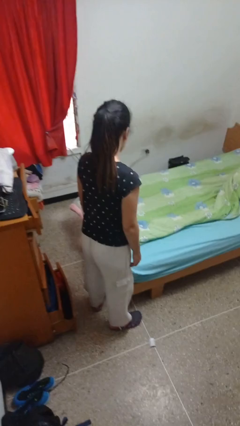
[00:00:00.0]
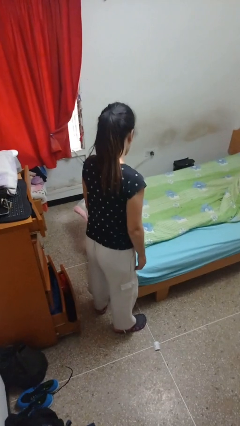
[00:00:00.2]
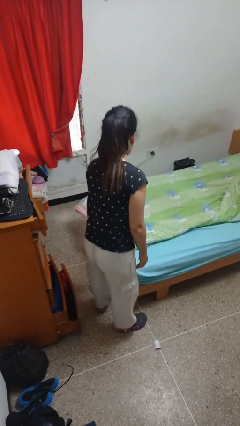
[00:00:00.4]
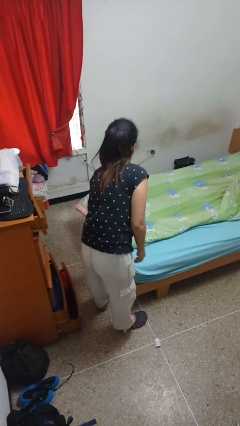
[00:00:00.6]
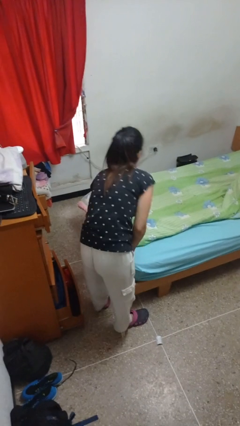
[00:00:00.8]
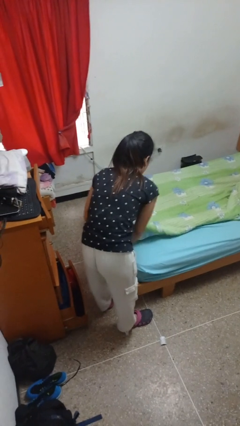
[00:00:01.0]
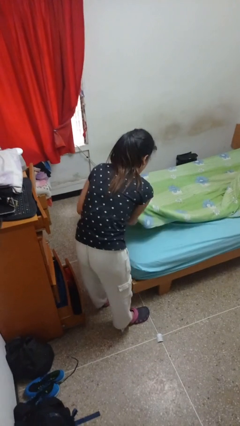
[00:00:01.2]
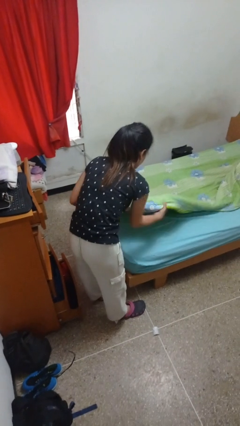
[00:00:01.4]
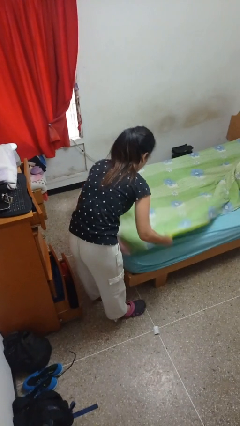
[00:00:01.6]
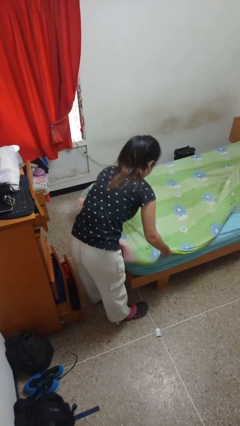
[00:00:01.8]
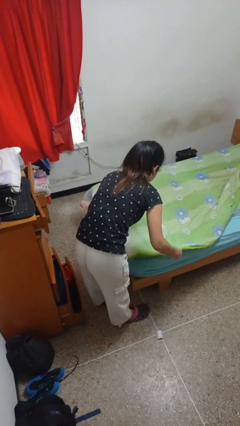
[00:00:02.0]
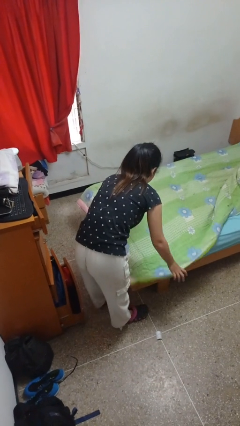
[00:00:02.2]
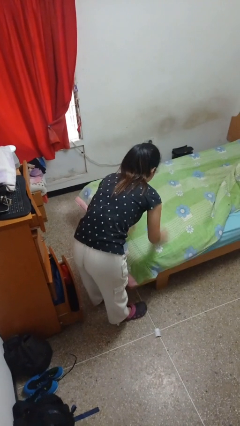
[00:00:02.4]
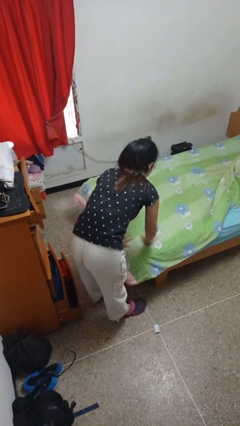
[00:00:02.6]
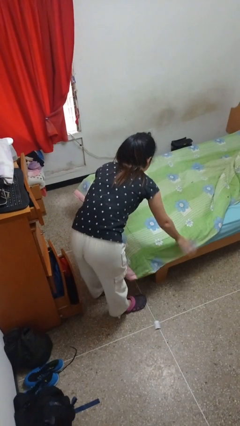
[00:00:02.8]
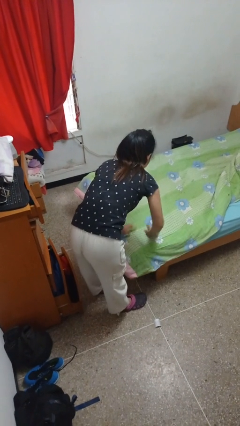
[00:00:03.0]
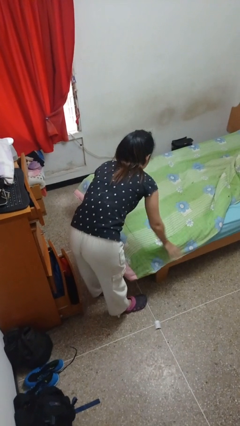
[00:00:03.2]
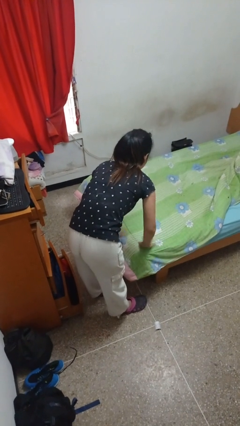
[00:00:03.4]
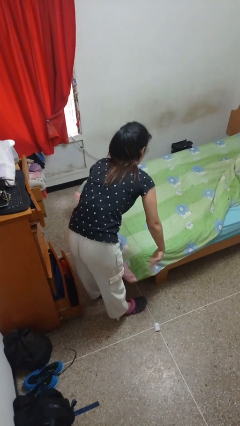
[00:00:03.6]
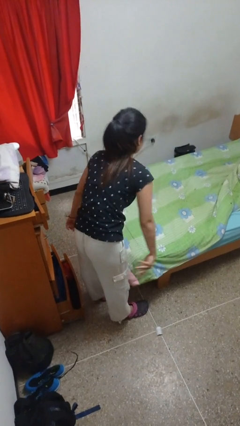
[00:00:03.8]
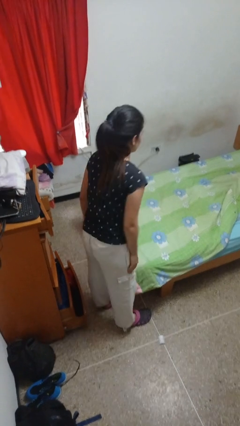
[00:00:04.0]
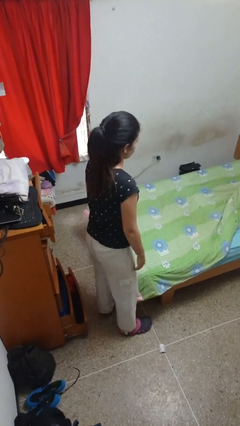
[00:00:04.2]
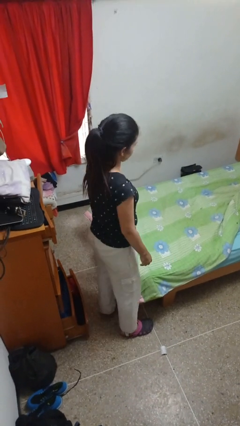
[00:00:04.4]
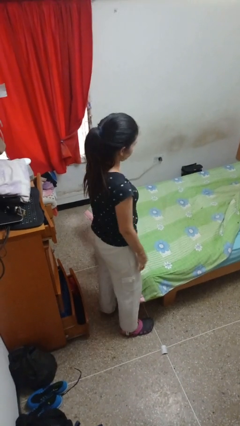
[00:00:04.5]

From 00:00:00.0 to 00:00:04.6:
person makes bed

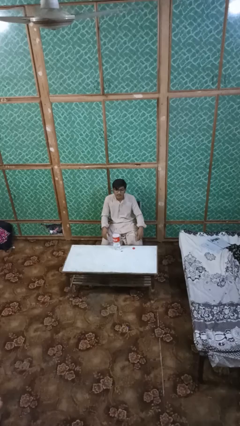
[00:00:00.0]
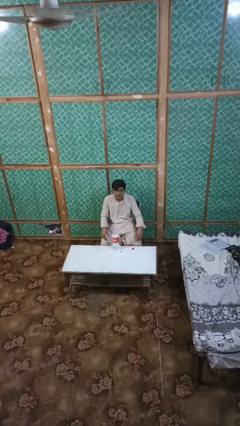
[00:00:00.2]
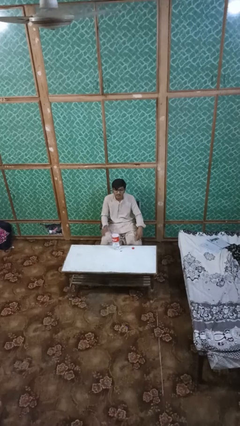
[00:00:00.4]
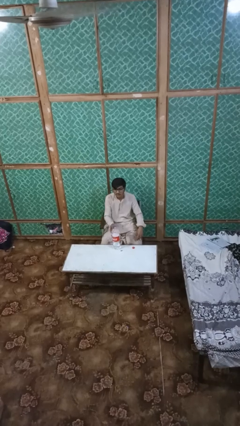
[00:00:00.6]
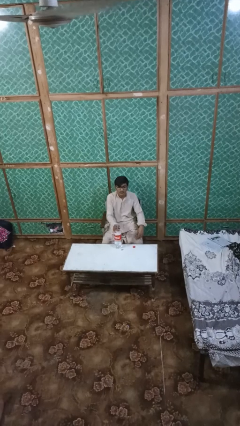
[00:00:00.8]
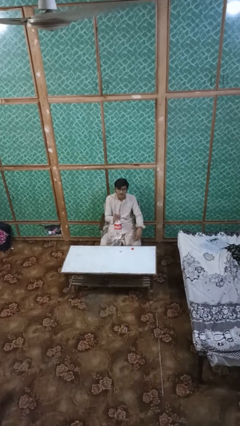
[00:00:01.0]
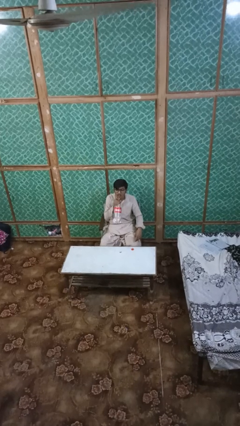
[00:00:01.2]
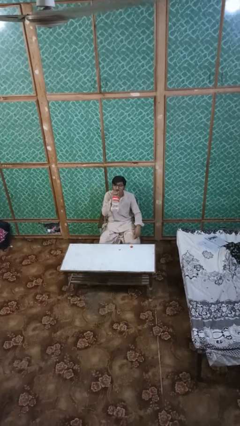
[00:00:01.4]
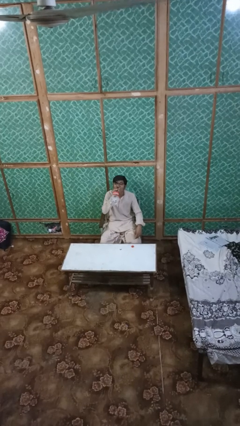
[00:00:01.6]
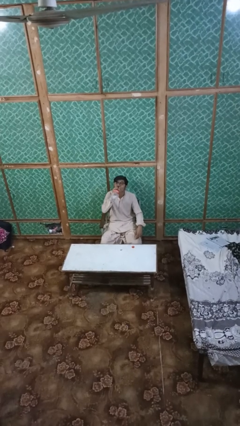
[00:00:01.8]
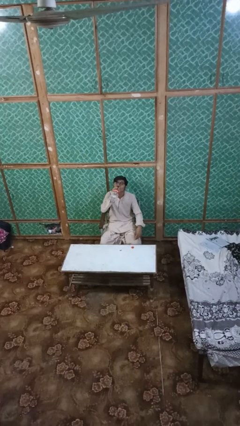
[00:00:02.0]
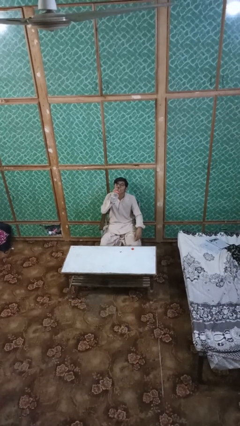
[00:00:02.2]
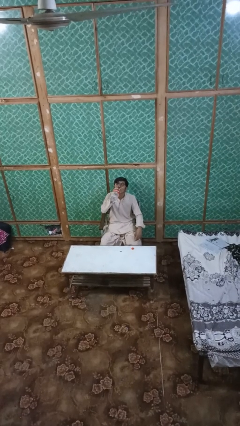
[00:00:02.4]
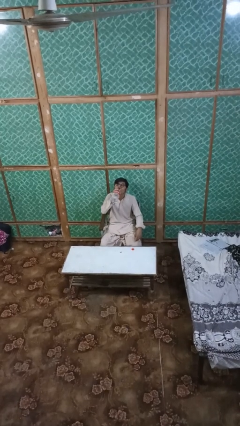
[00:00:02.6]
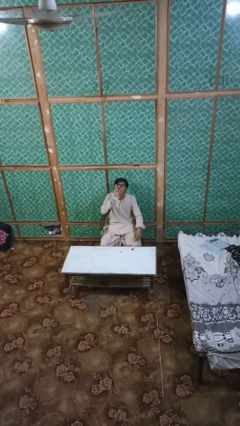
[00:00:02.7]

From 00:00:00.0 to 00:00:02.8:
person drinks from bottle

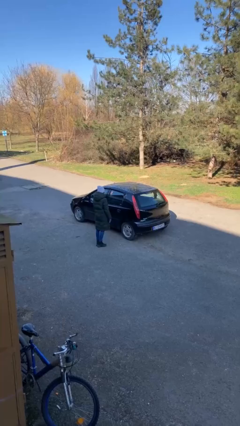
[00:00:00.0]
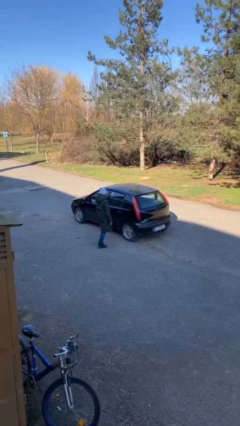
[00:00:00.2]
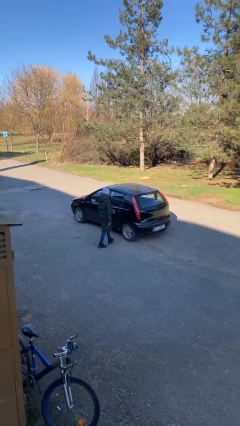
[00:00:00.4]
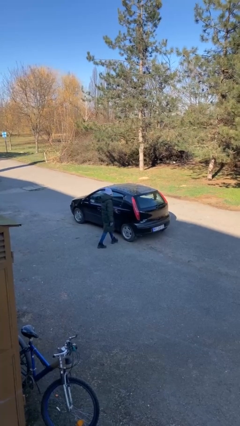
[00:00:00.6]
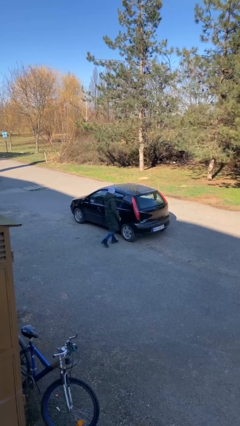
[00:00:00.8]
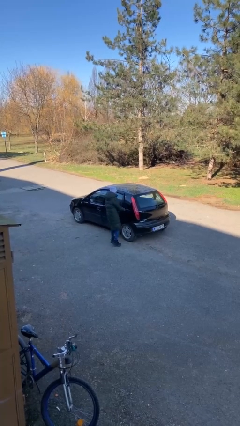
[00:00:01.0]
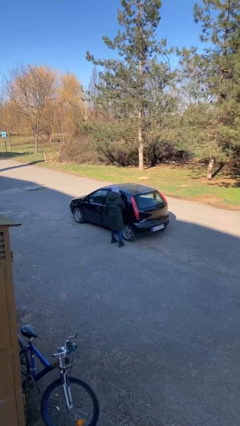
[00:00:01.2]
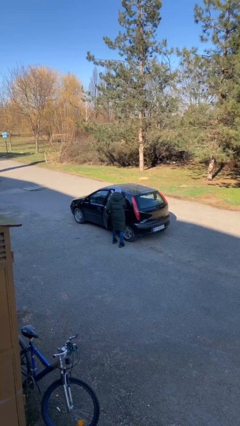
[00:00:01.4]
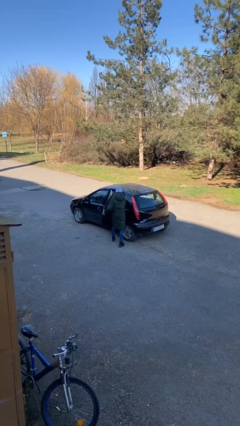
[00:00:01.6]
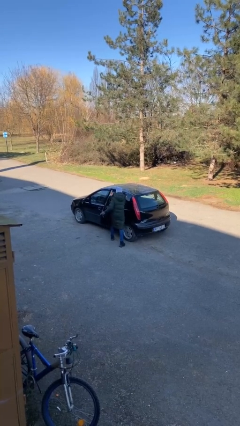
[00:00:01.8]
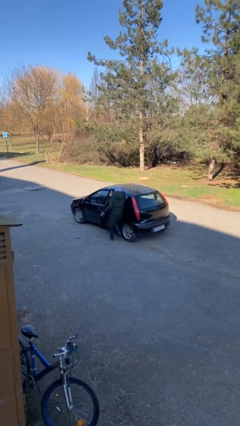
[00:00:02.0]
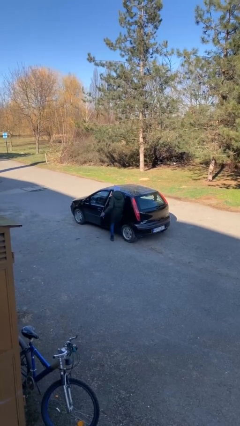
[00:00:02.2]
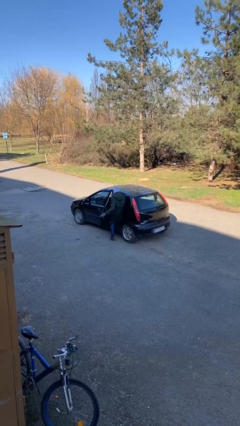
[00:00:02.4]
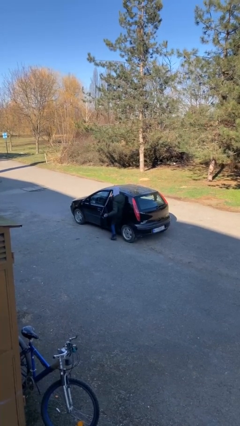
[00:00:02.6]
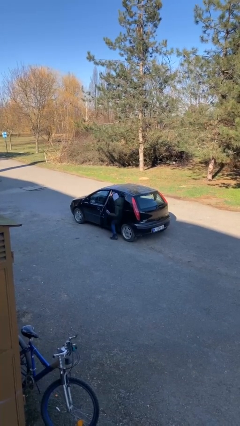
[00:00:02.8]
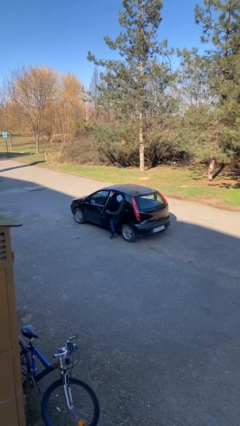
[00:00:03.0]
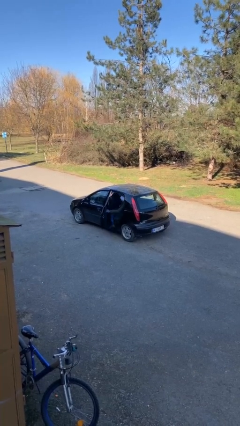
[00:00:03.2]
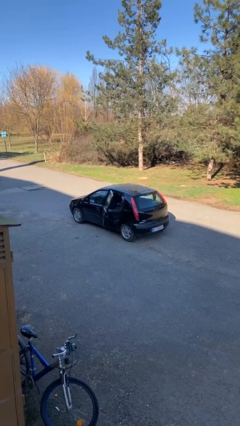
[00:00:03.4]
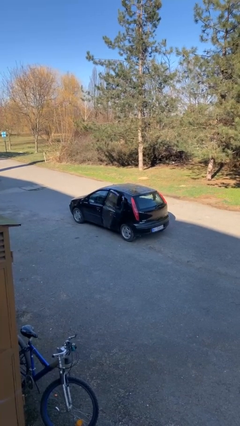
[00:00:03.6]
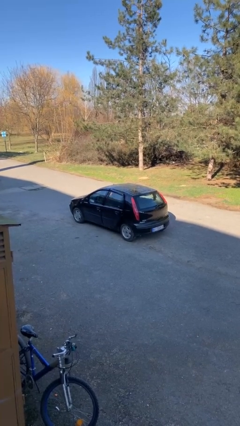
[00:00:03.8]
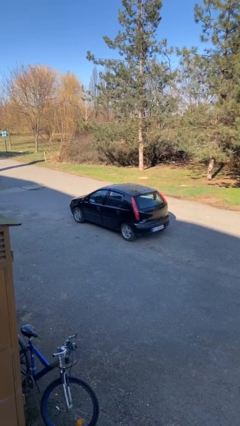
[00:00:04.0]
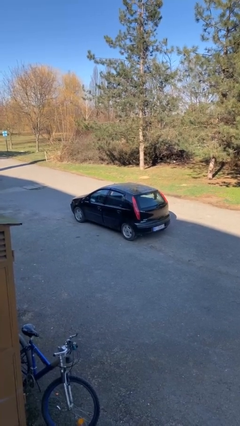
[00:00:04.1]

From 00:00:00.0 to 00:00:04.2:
car picks up person

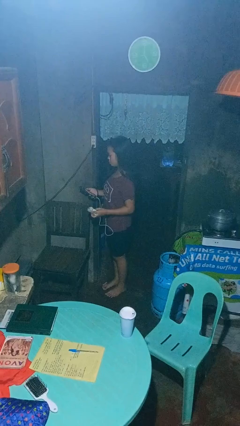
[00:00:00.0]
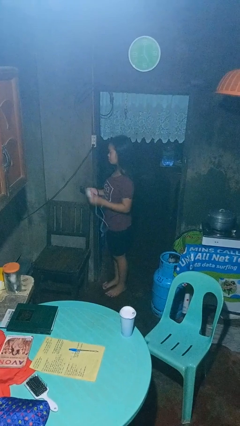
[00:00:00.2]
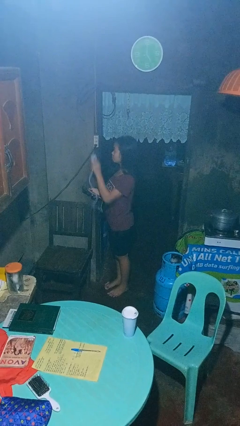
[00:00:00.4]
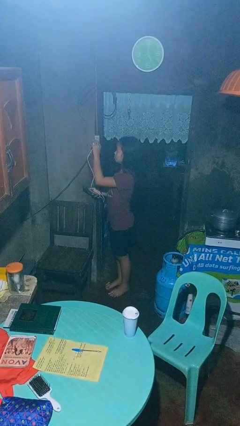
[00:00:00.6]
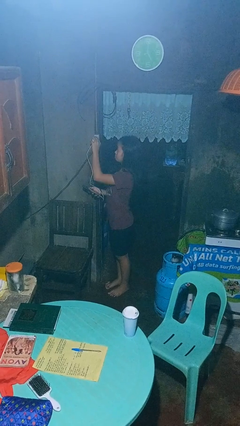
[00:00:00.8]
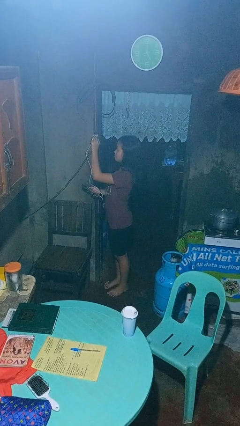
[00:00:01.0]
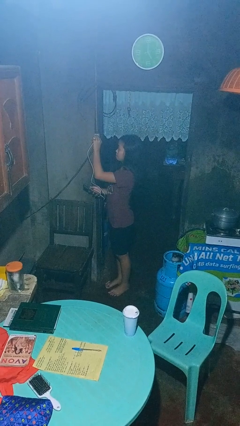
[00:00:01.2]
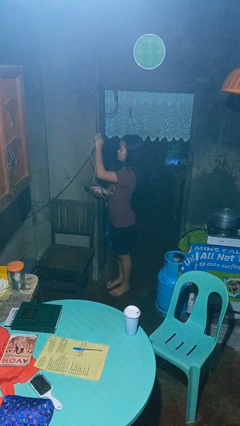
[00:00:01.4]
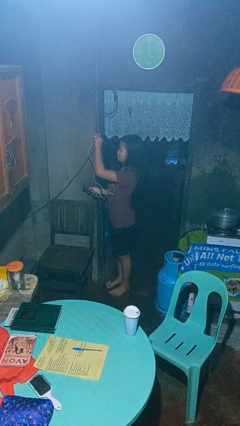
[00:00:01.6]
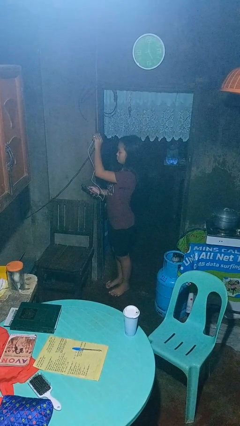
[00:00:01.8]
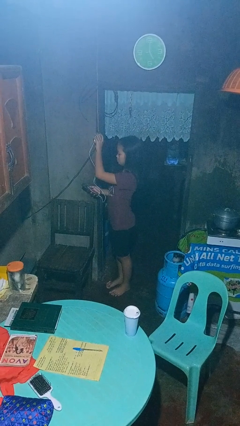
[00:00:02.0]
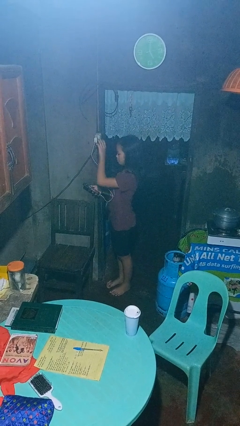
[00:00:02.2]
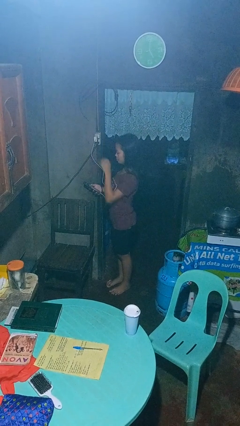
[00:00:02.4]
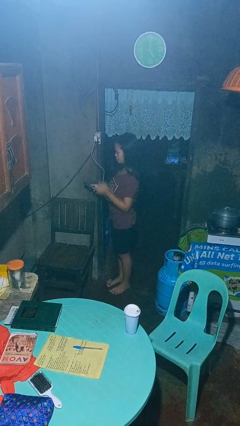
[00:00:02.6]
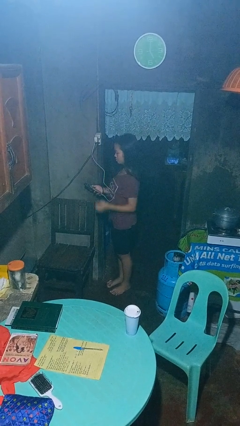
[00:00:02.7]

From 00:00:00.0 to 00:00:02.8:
person plugs into electrical socket

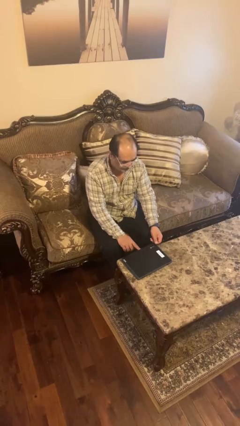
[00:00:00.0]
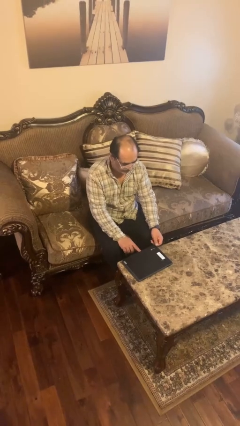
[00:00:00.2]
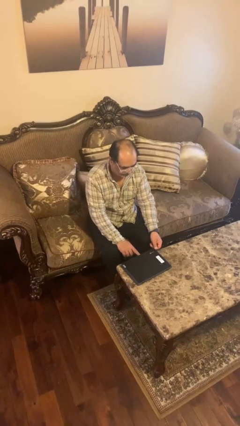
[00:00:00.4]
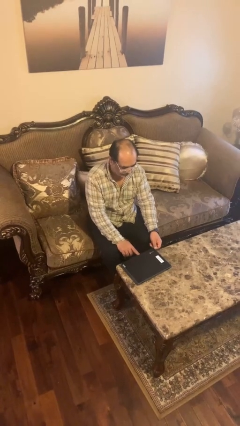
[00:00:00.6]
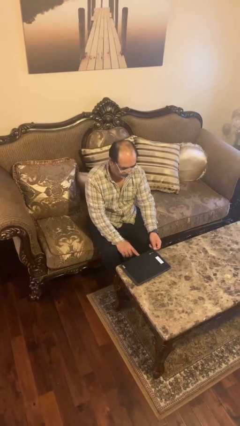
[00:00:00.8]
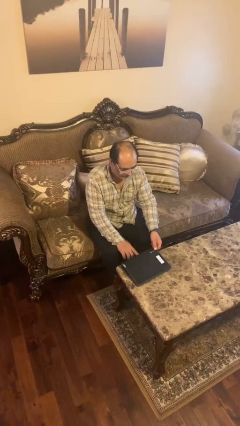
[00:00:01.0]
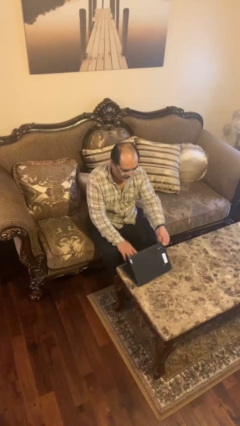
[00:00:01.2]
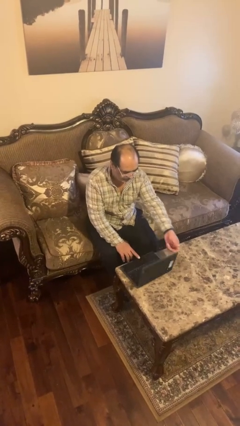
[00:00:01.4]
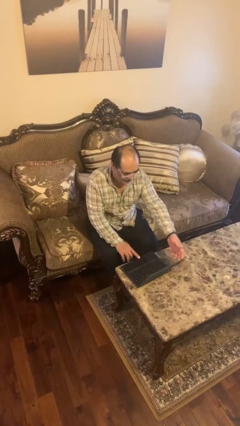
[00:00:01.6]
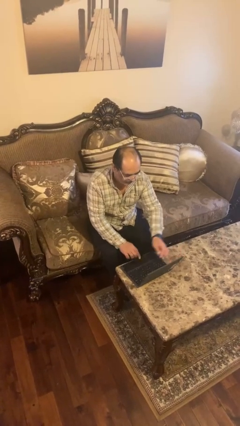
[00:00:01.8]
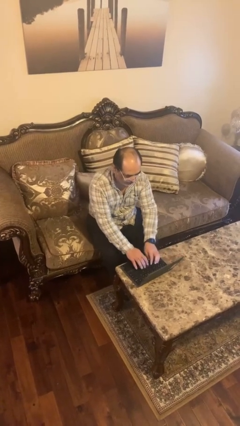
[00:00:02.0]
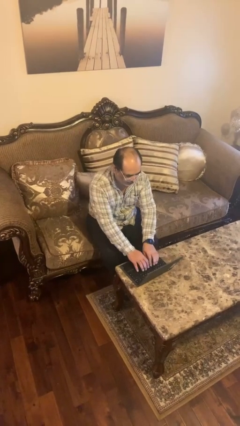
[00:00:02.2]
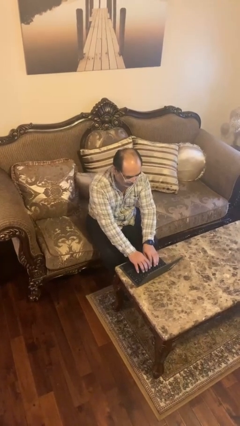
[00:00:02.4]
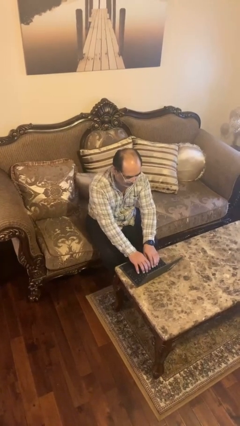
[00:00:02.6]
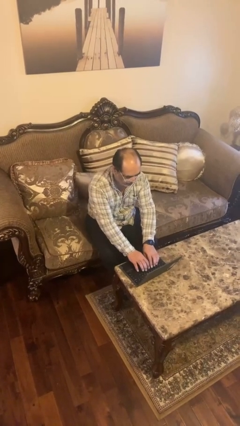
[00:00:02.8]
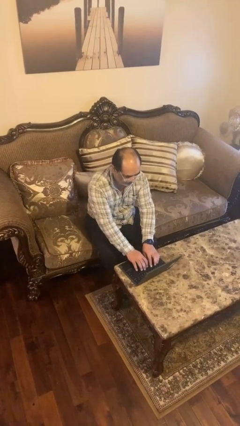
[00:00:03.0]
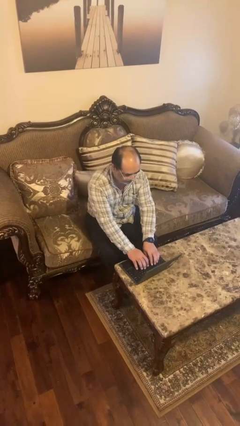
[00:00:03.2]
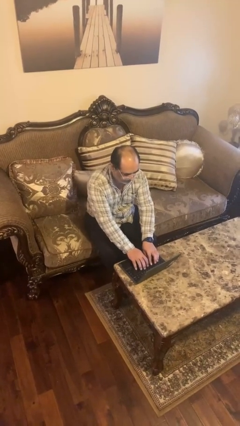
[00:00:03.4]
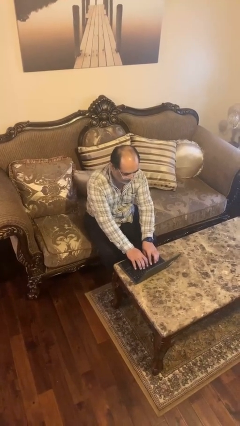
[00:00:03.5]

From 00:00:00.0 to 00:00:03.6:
person interacts with laptop
